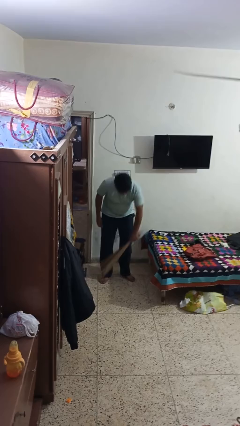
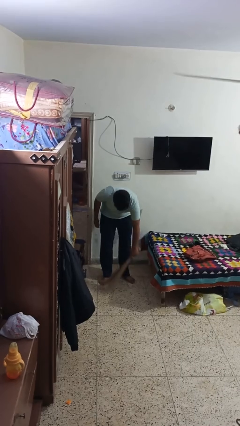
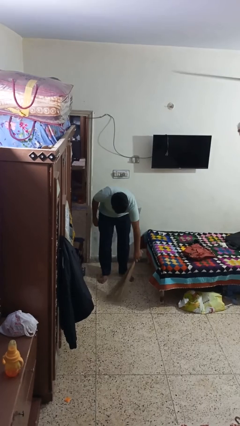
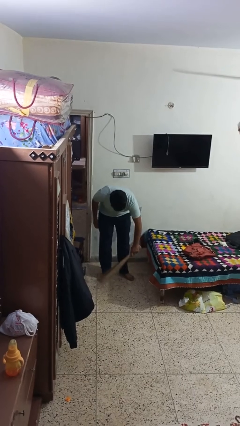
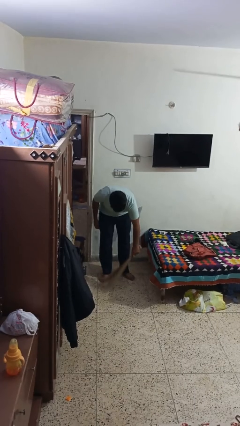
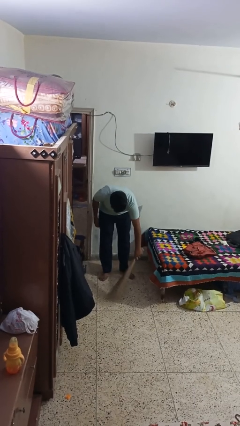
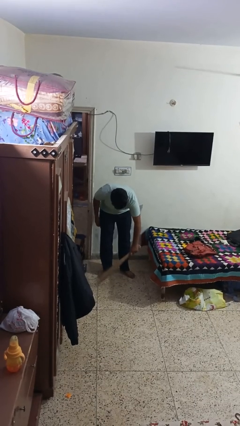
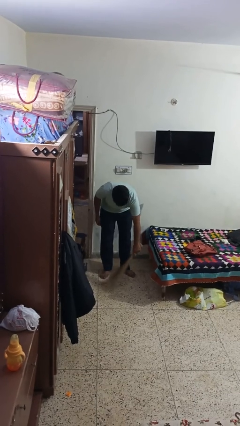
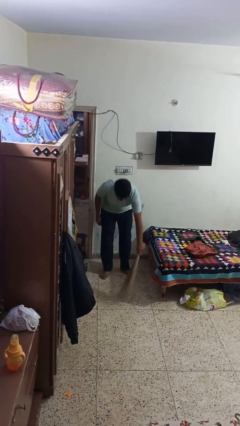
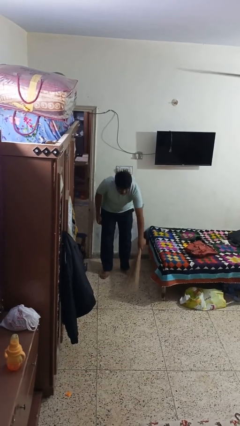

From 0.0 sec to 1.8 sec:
person sweeps floor

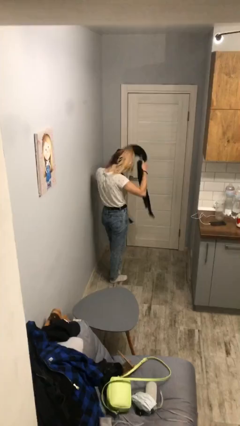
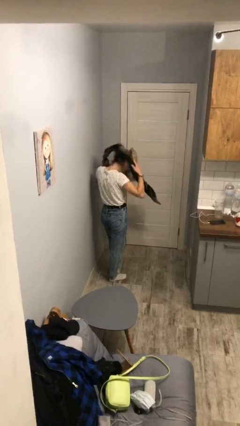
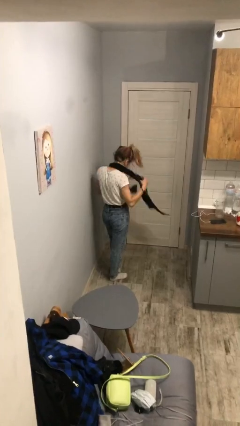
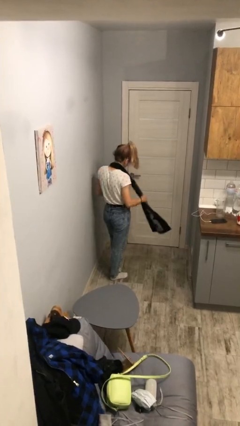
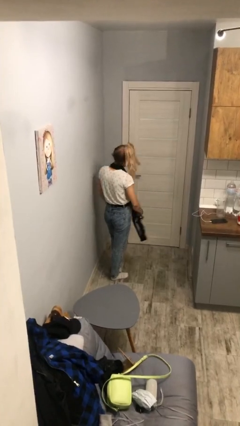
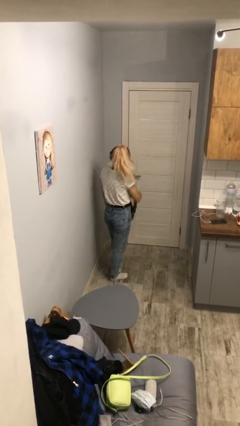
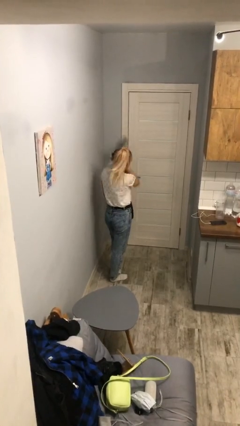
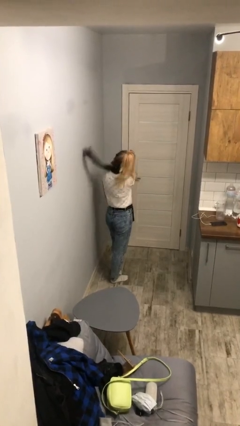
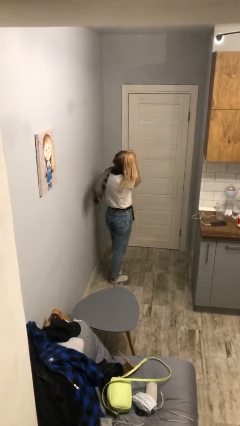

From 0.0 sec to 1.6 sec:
person puts on scarf

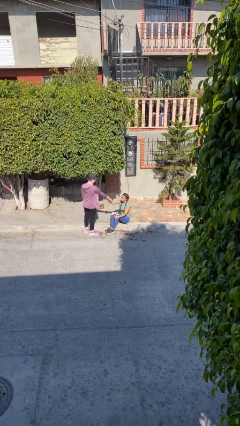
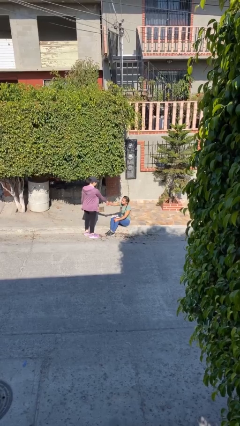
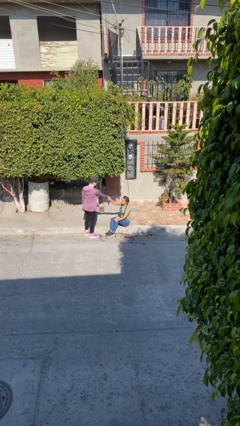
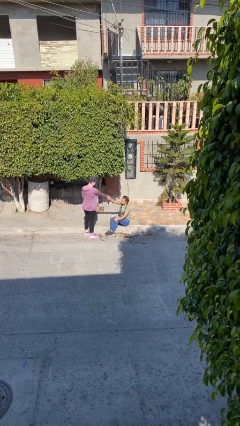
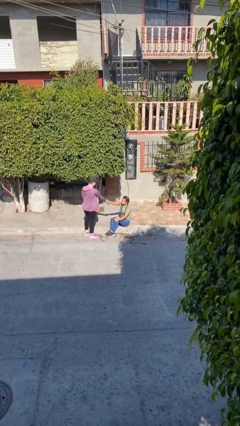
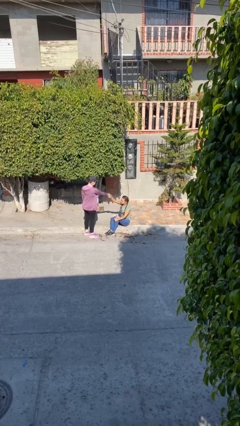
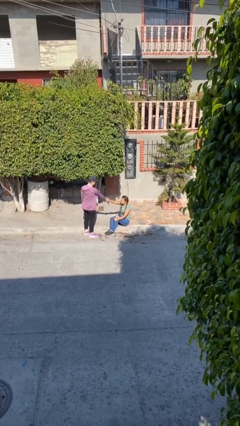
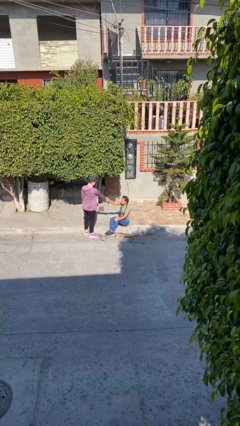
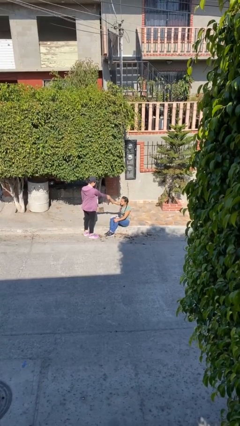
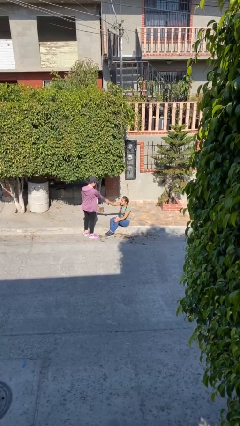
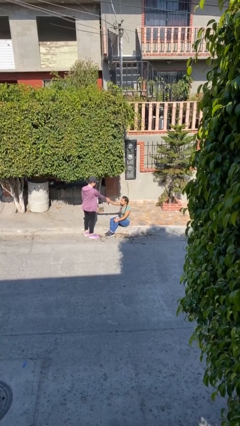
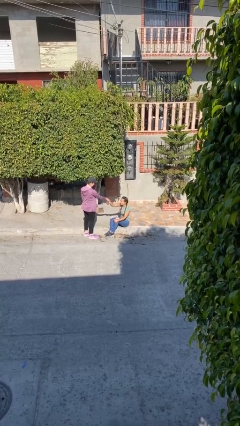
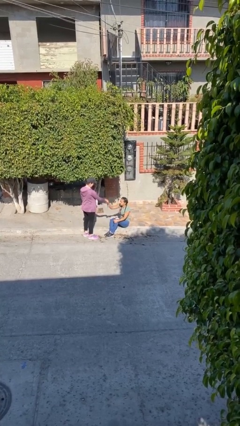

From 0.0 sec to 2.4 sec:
person shakes hand

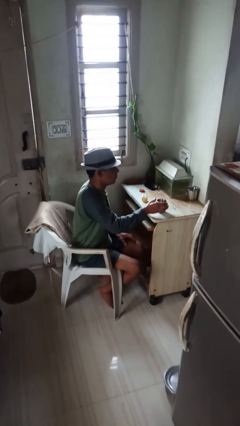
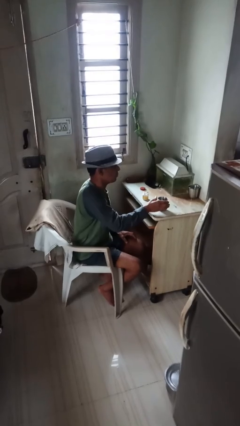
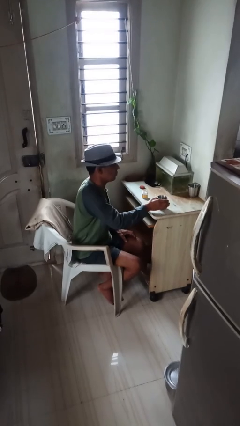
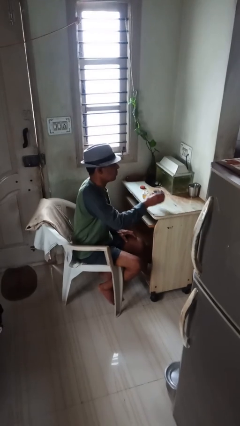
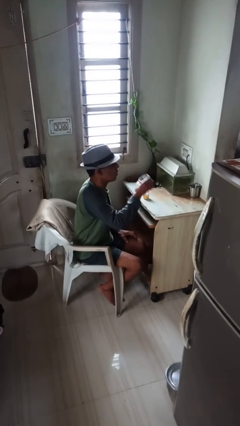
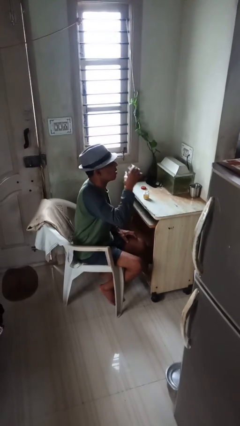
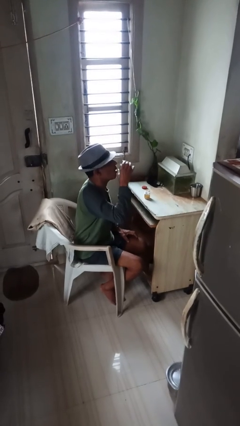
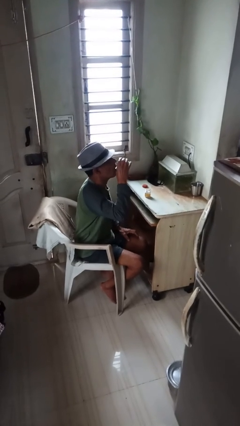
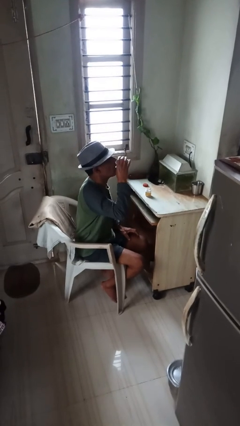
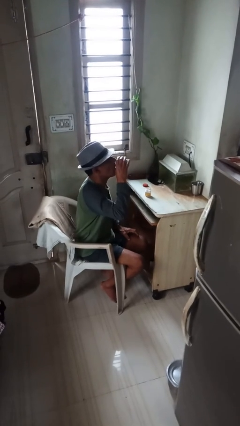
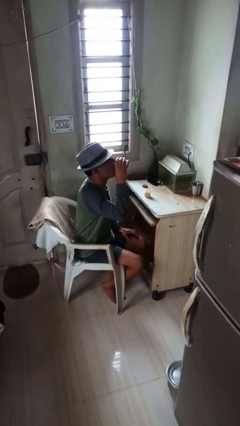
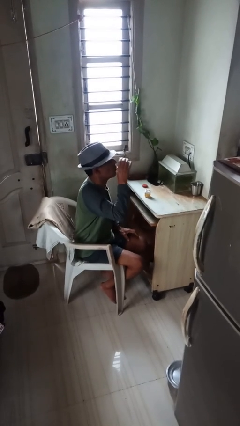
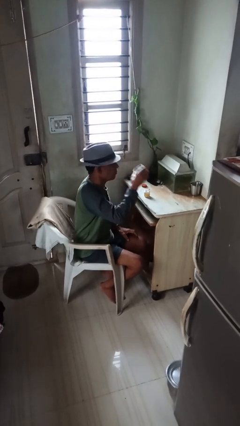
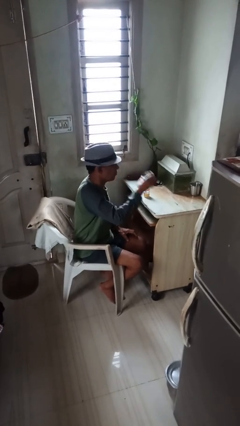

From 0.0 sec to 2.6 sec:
person drinks from cup

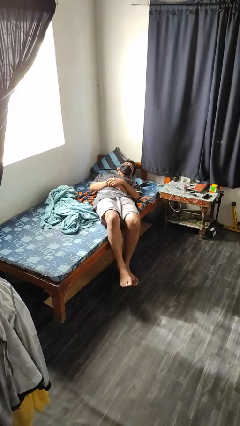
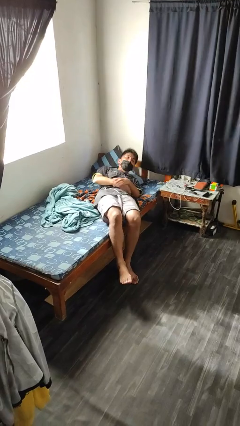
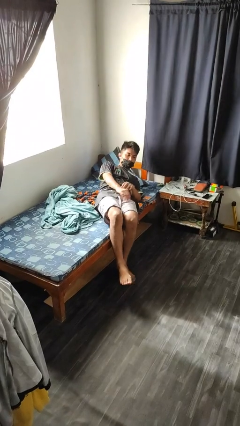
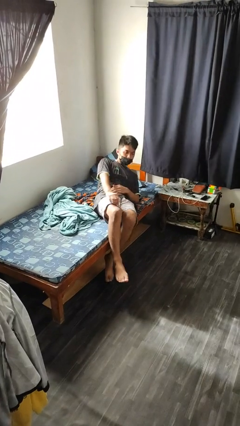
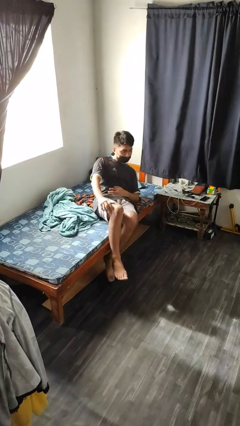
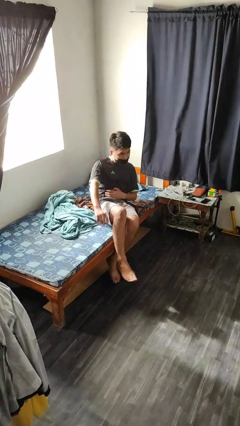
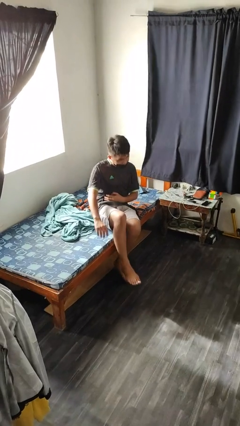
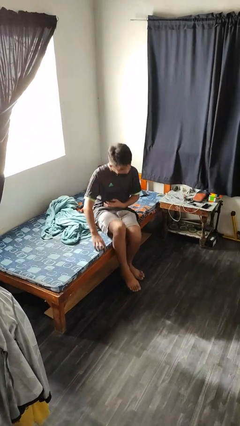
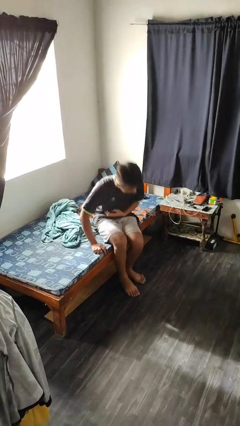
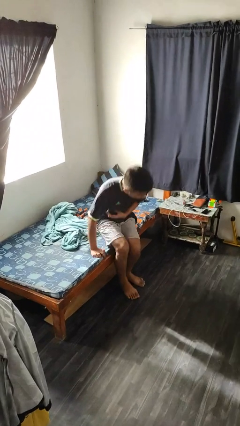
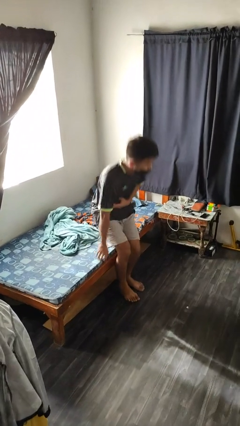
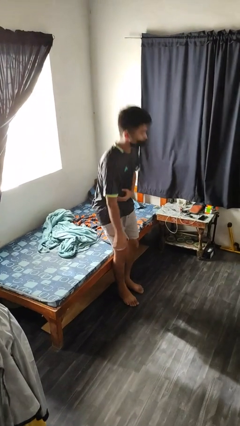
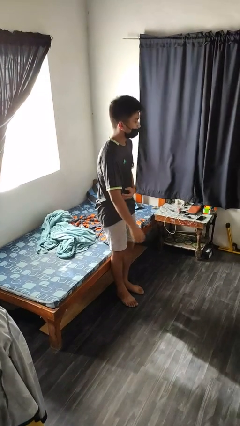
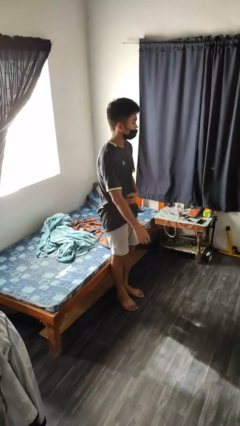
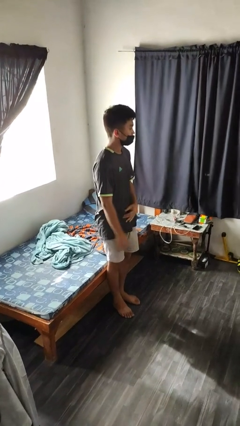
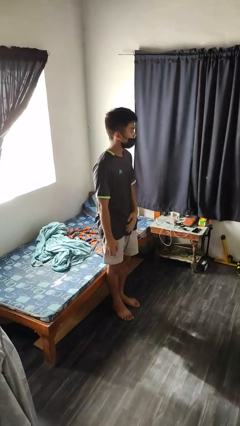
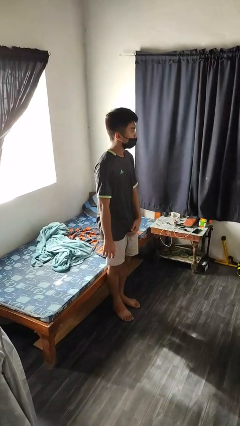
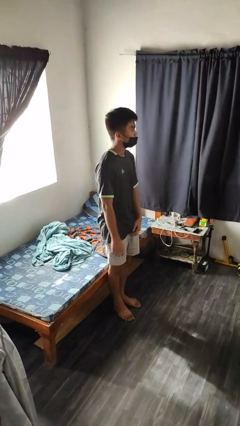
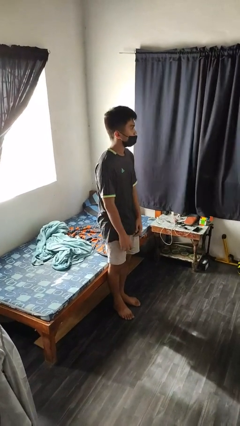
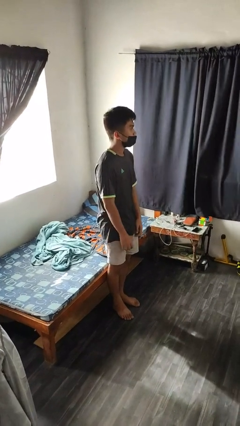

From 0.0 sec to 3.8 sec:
person stands up

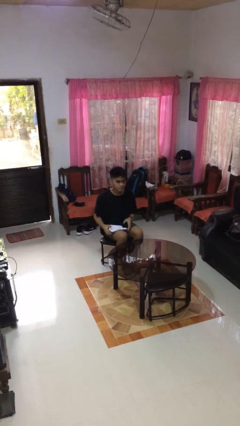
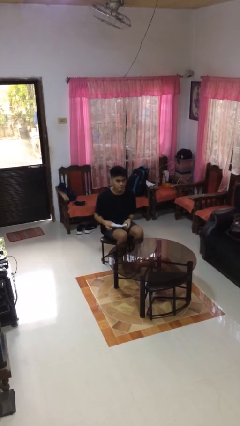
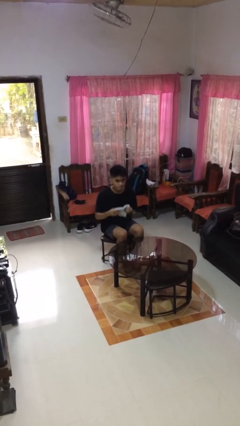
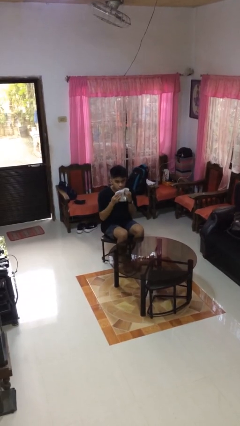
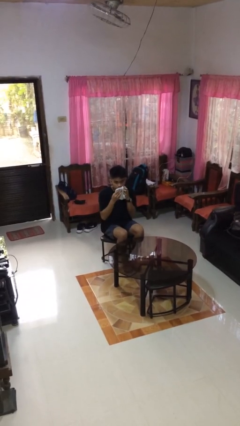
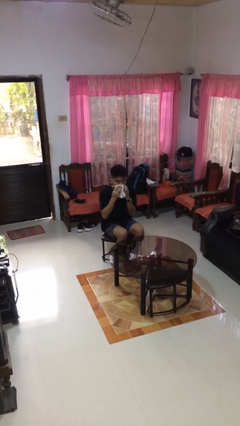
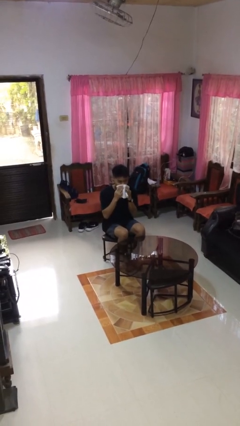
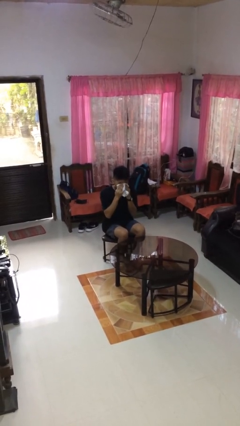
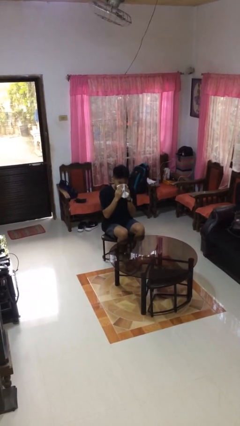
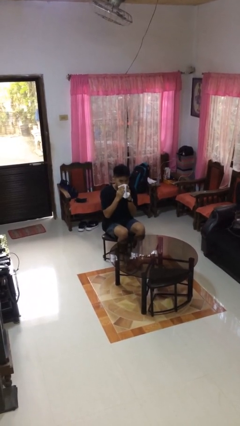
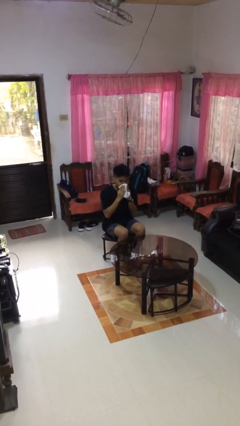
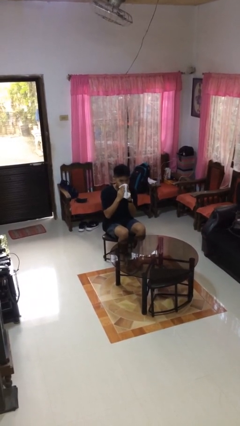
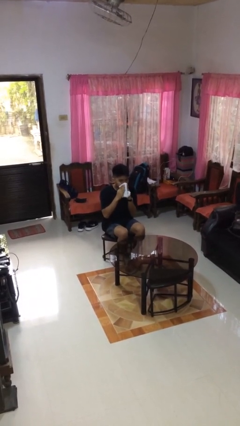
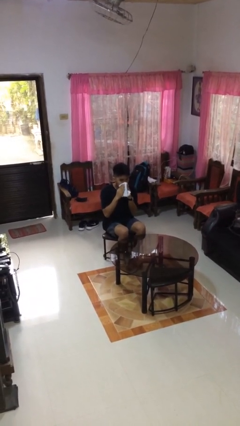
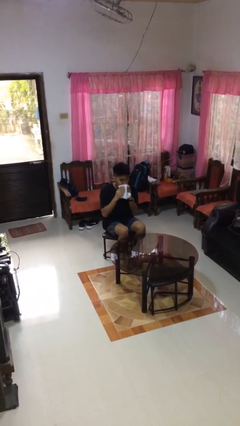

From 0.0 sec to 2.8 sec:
person wipes mouth with napkin

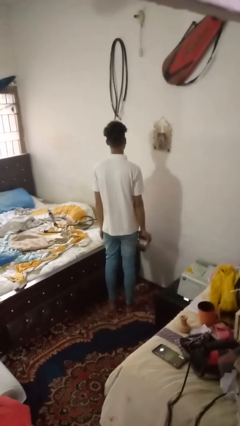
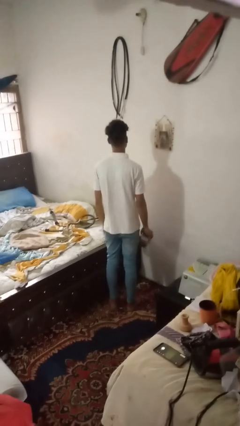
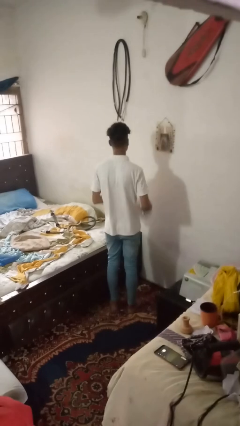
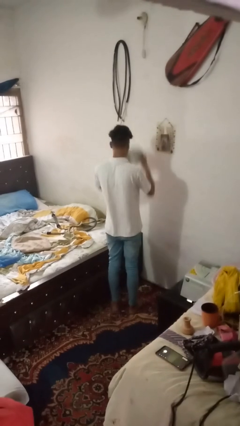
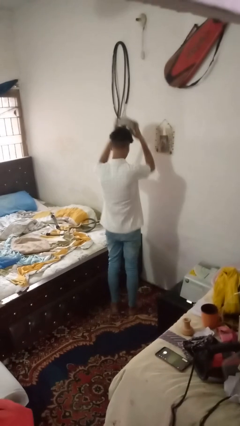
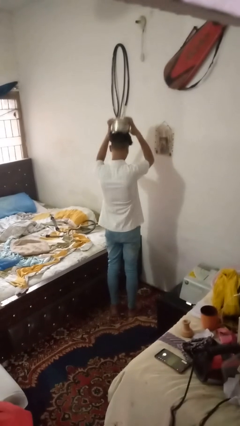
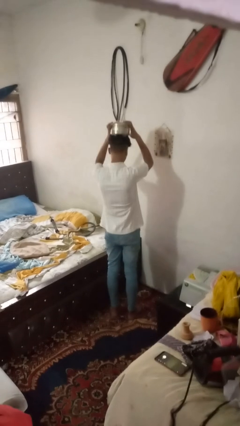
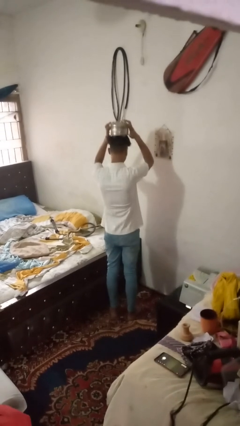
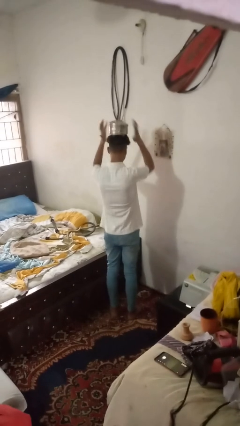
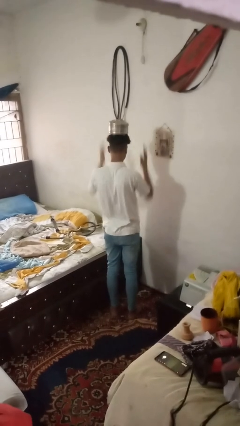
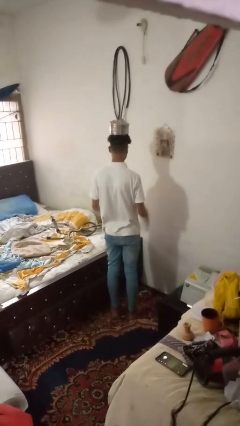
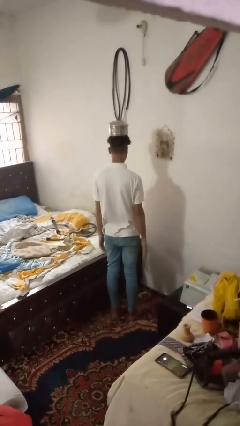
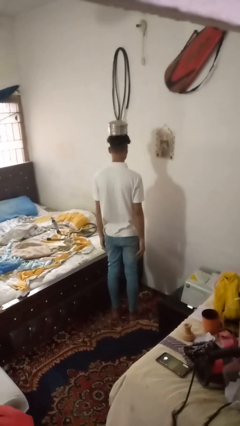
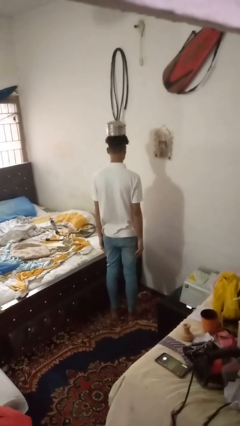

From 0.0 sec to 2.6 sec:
person holds object above head
